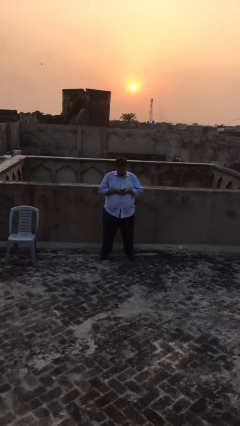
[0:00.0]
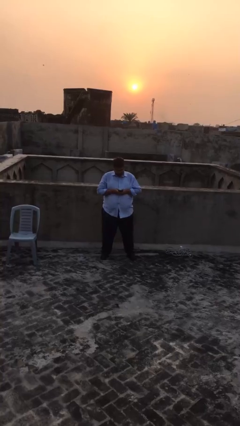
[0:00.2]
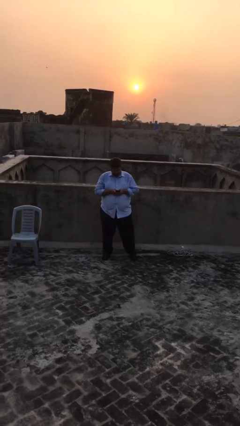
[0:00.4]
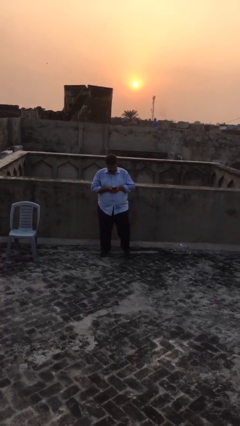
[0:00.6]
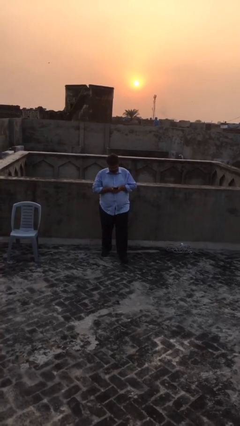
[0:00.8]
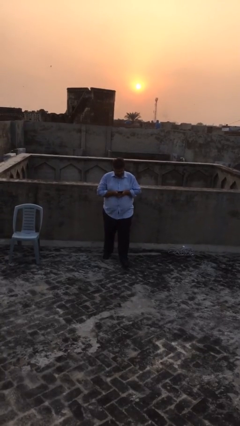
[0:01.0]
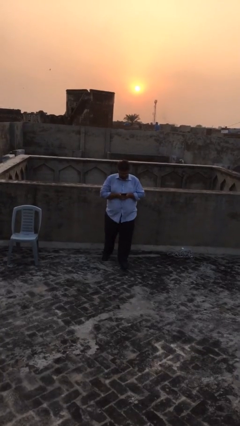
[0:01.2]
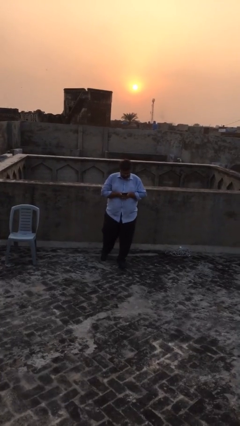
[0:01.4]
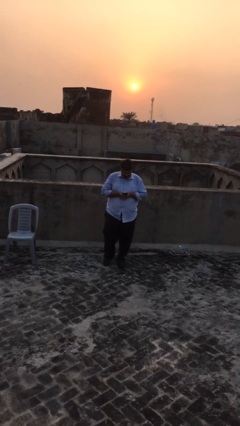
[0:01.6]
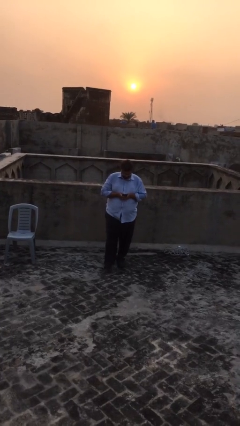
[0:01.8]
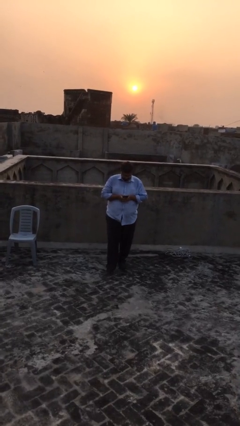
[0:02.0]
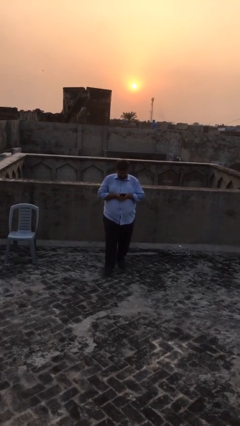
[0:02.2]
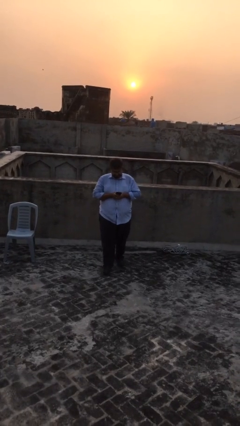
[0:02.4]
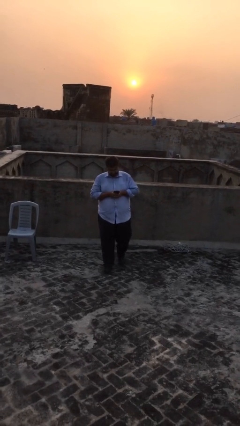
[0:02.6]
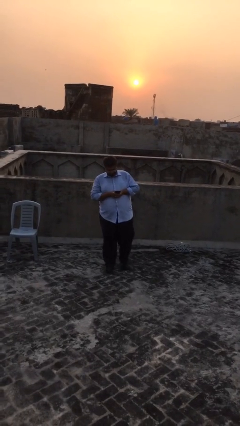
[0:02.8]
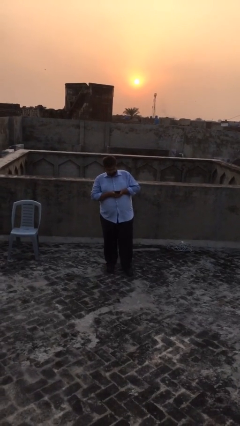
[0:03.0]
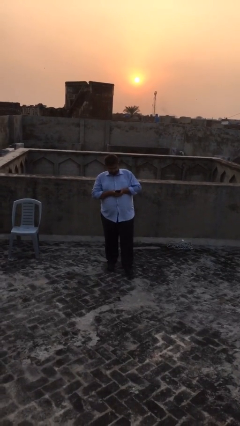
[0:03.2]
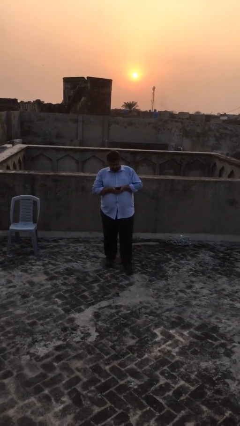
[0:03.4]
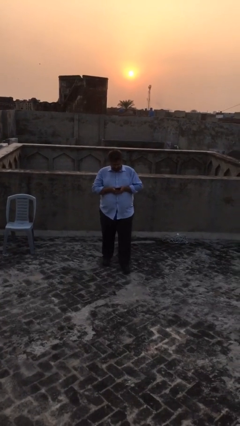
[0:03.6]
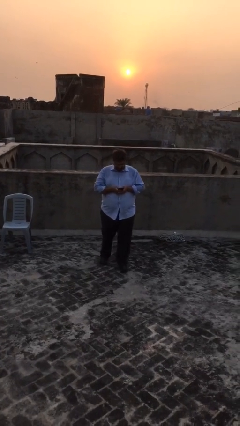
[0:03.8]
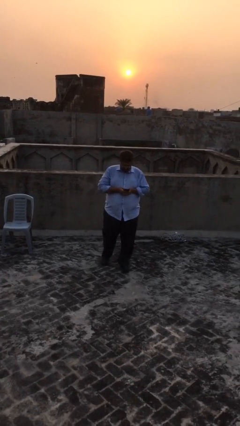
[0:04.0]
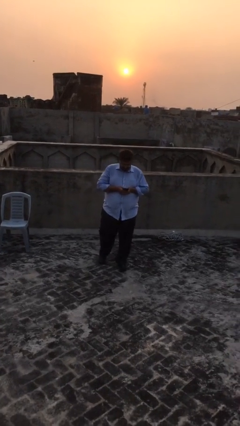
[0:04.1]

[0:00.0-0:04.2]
person texts on phone

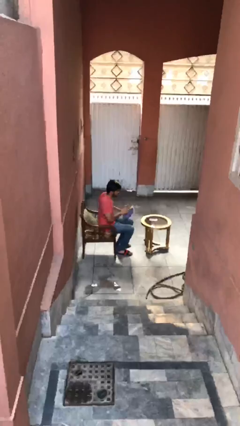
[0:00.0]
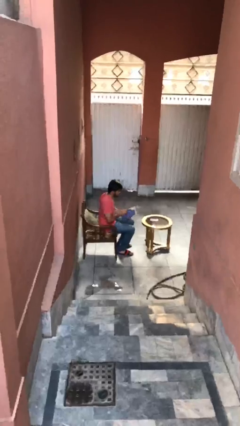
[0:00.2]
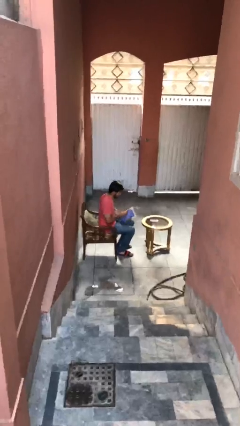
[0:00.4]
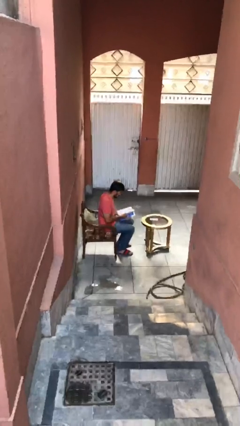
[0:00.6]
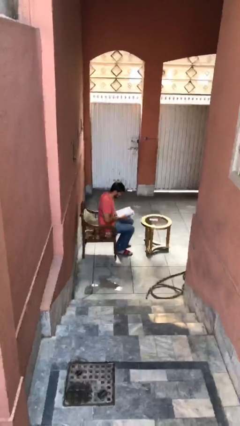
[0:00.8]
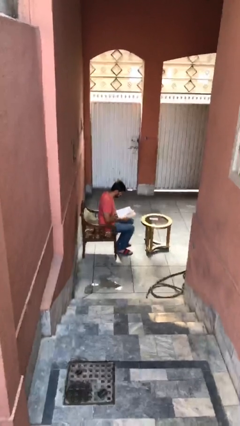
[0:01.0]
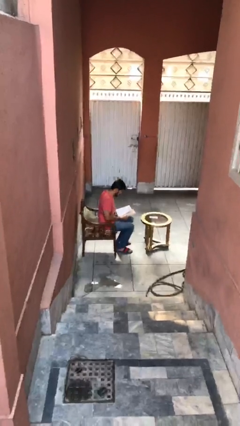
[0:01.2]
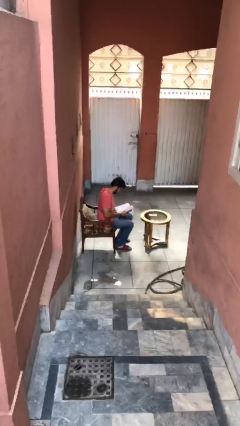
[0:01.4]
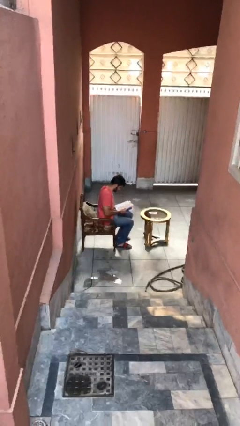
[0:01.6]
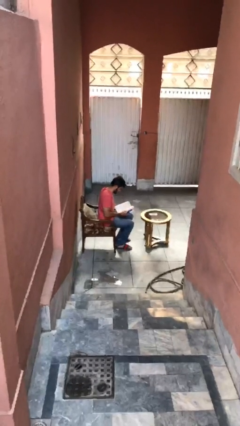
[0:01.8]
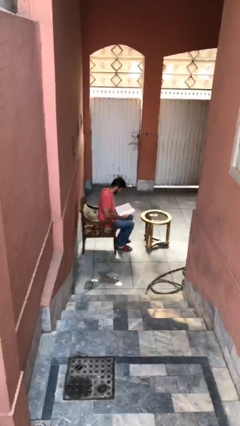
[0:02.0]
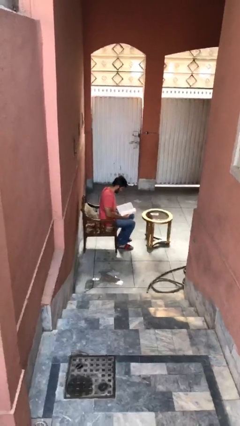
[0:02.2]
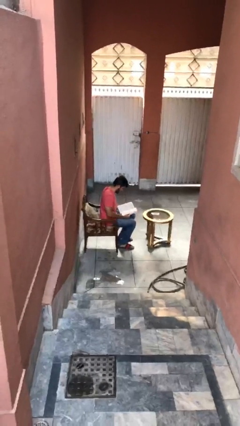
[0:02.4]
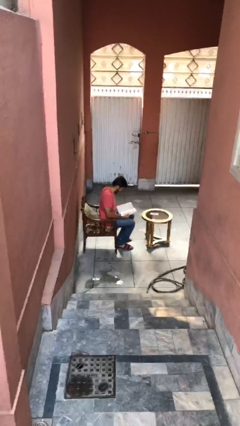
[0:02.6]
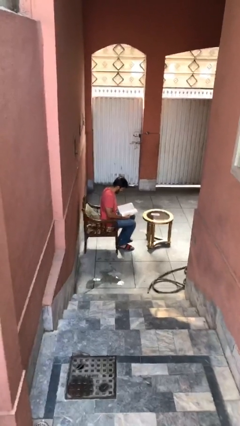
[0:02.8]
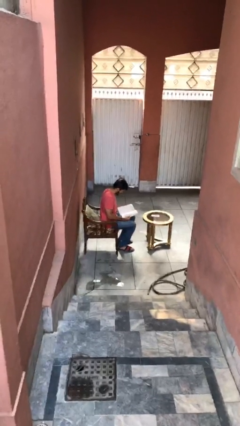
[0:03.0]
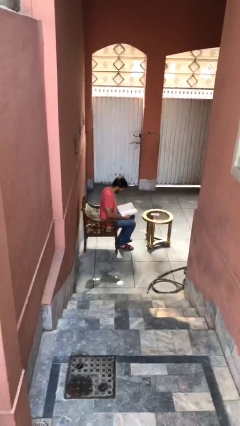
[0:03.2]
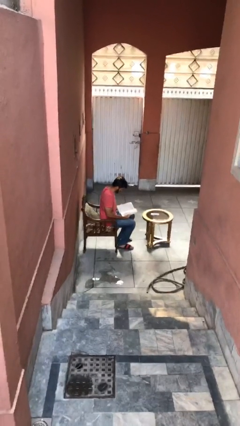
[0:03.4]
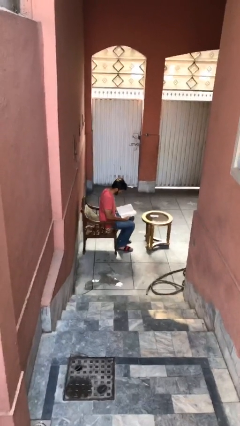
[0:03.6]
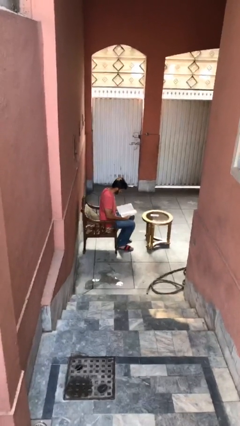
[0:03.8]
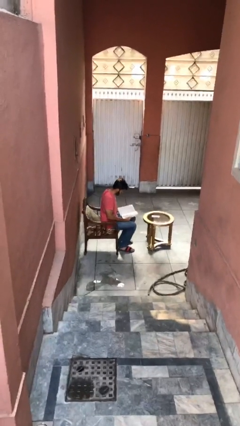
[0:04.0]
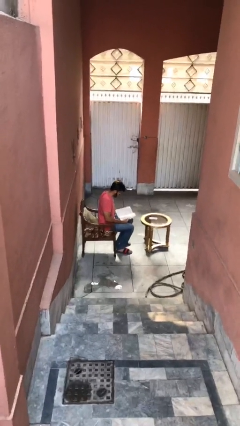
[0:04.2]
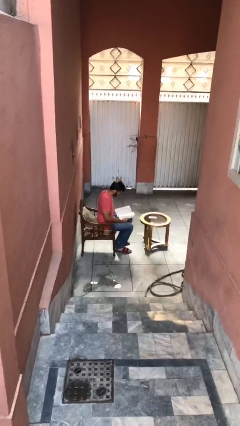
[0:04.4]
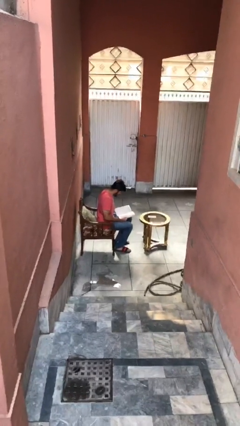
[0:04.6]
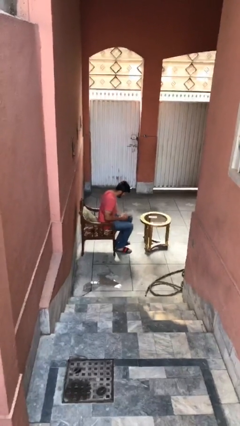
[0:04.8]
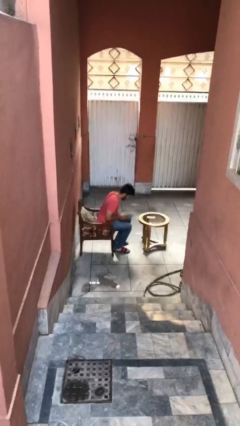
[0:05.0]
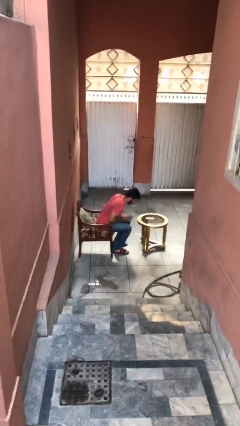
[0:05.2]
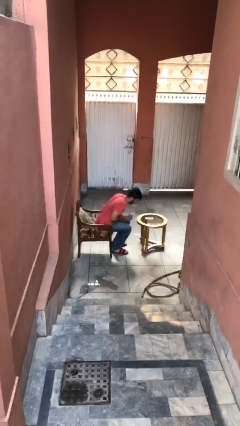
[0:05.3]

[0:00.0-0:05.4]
person reads document

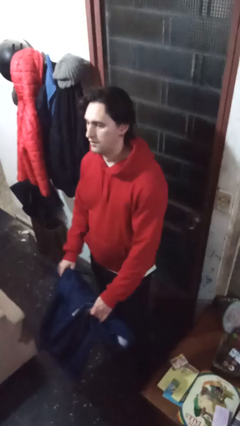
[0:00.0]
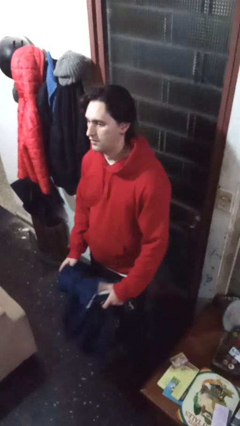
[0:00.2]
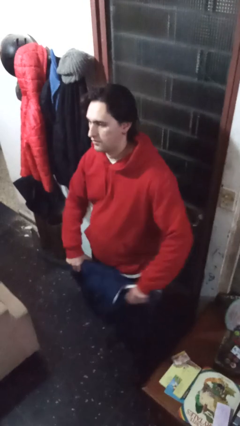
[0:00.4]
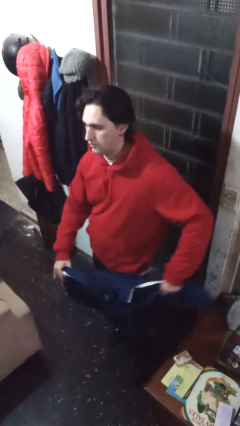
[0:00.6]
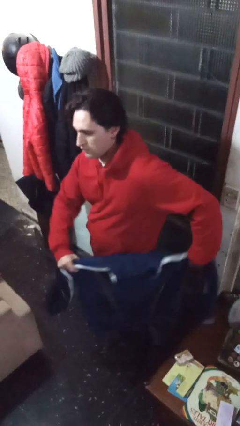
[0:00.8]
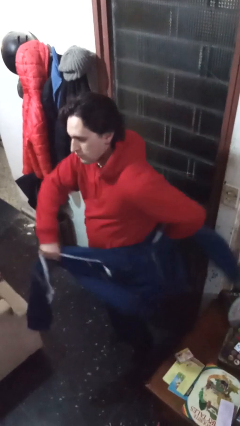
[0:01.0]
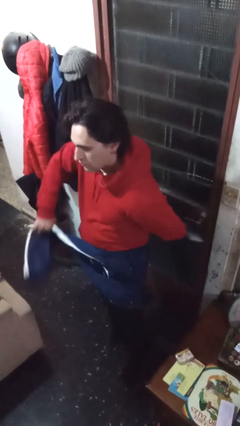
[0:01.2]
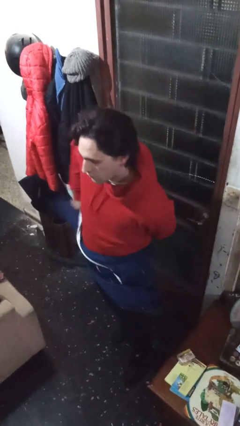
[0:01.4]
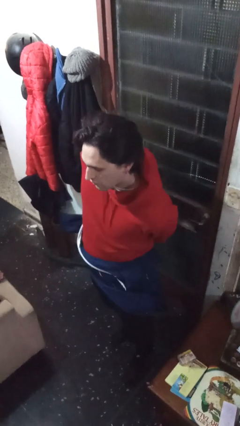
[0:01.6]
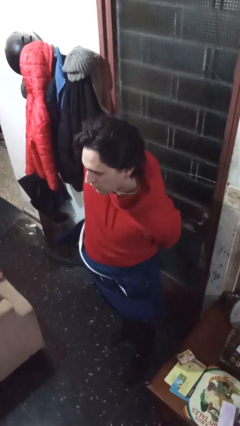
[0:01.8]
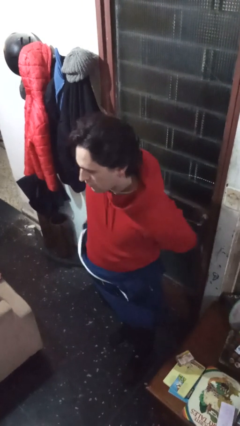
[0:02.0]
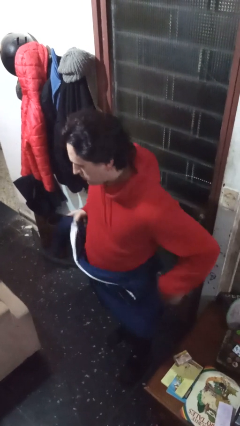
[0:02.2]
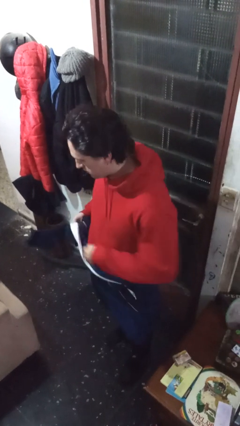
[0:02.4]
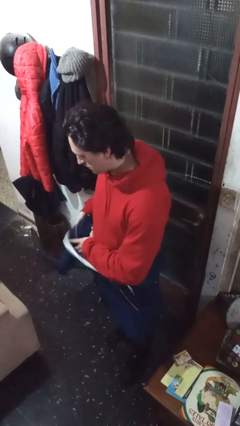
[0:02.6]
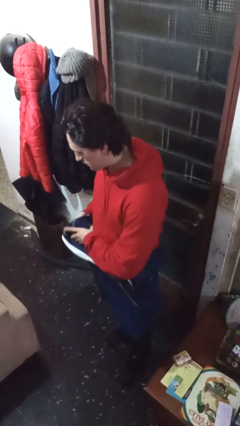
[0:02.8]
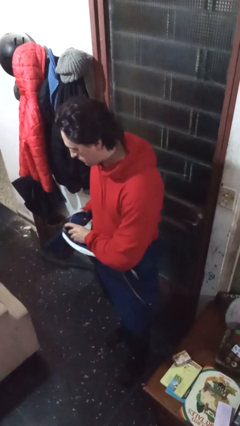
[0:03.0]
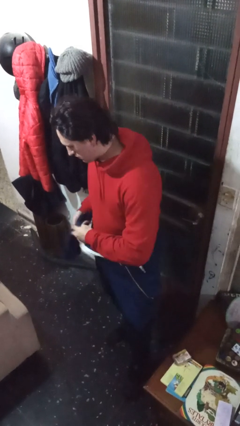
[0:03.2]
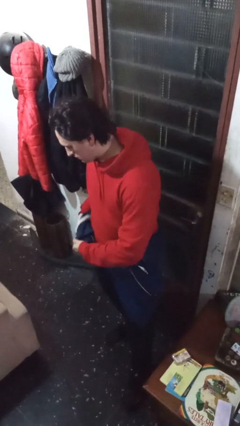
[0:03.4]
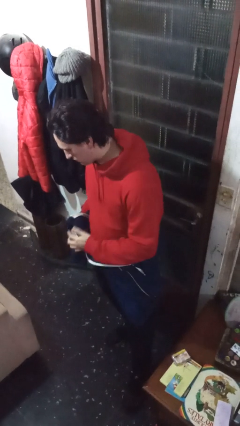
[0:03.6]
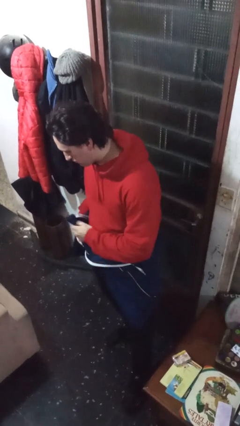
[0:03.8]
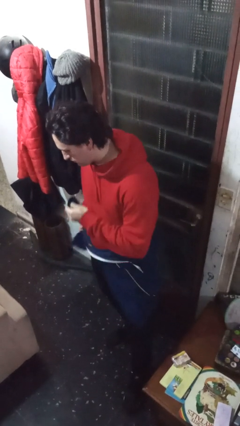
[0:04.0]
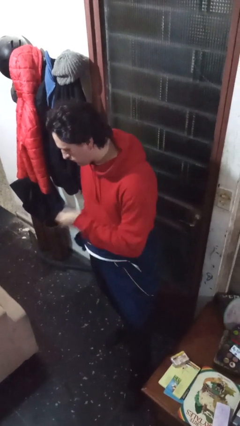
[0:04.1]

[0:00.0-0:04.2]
person ties jacket around waist

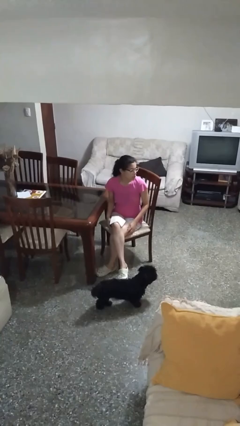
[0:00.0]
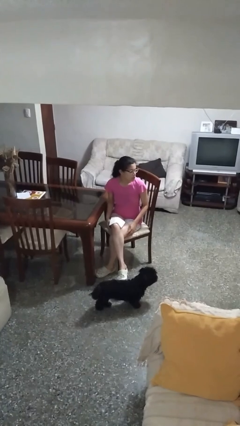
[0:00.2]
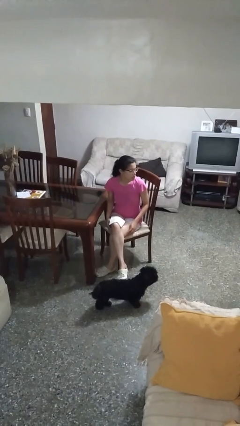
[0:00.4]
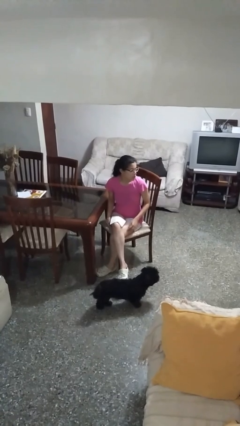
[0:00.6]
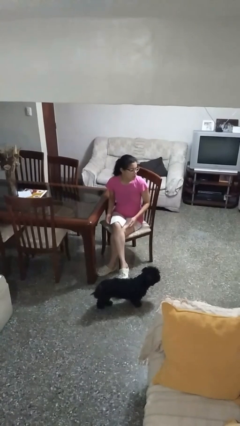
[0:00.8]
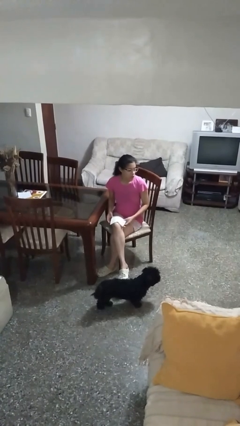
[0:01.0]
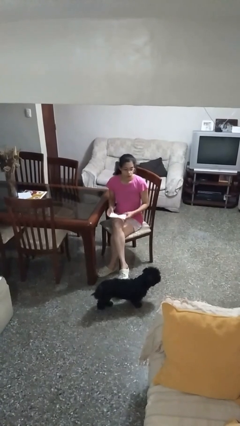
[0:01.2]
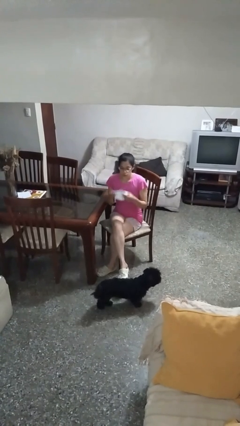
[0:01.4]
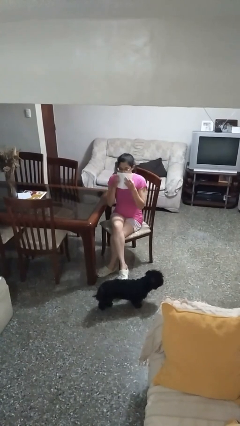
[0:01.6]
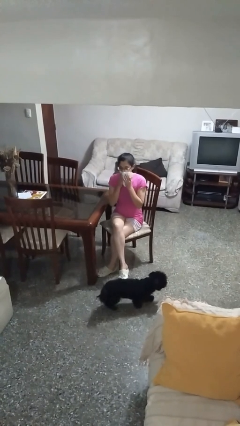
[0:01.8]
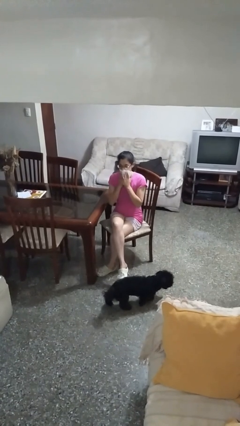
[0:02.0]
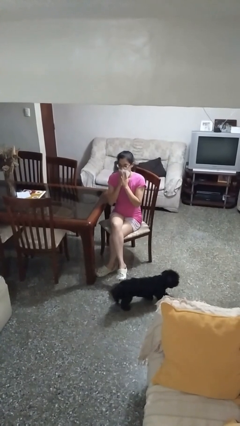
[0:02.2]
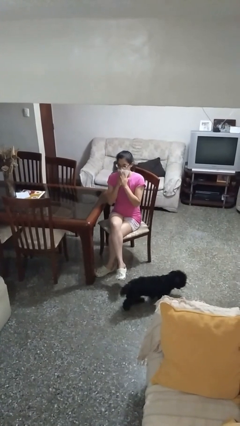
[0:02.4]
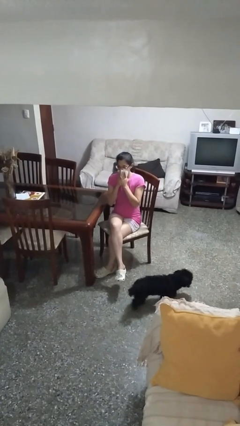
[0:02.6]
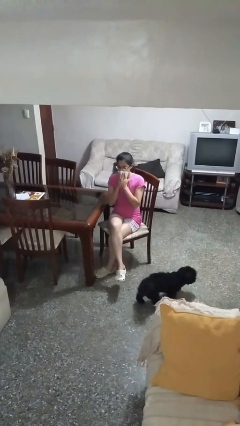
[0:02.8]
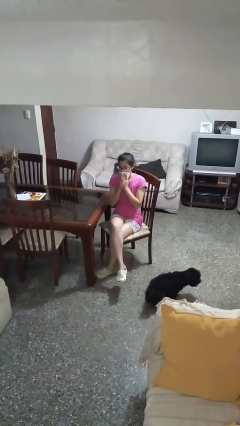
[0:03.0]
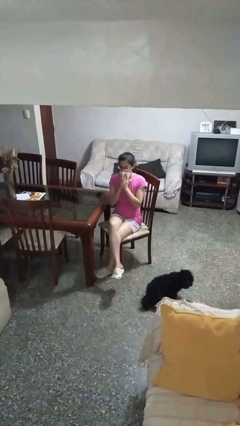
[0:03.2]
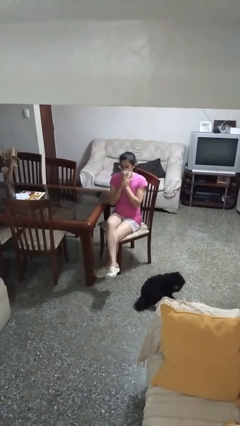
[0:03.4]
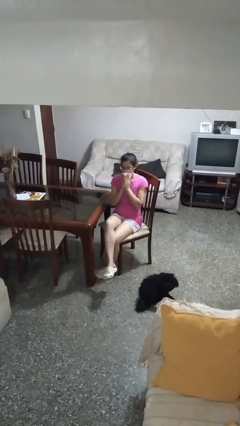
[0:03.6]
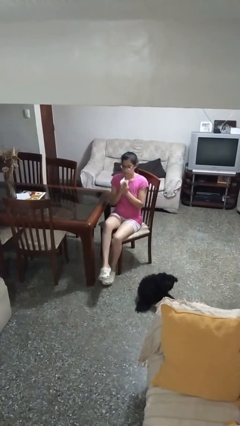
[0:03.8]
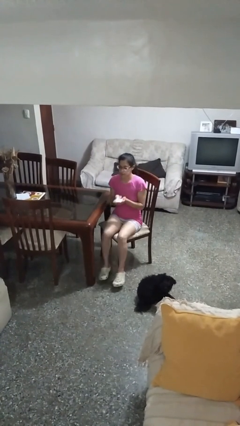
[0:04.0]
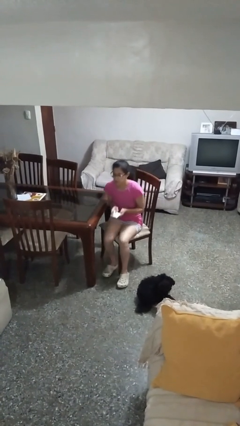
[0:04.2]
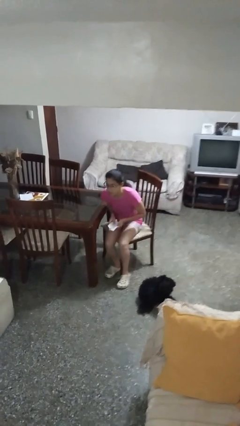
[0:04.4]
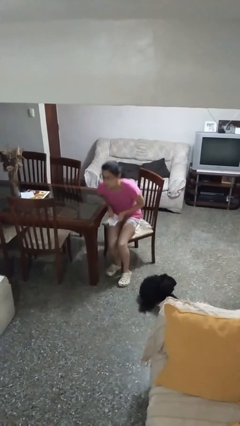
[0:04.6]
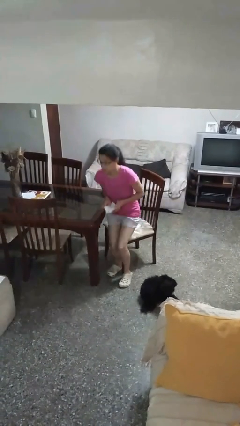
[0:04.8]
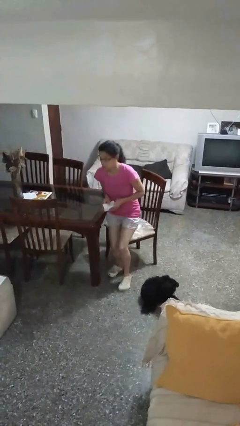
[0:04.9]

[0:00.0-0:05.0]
person wipes mouth with napkin
